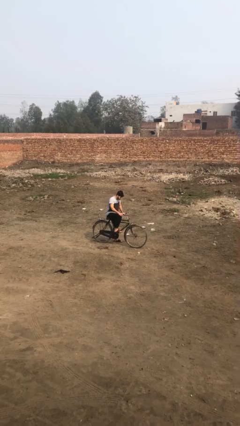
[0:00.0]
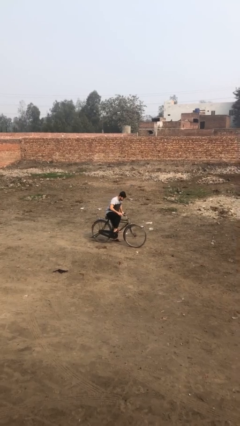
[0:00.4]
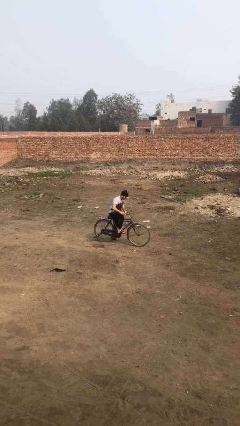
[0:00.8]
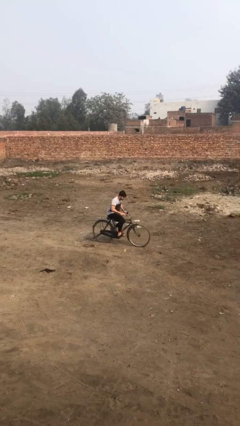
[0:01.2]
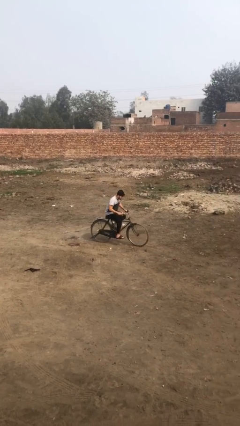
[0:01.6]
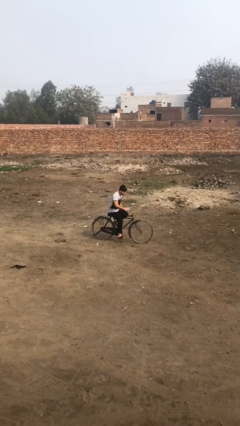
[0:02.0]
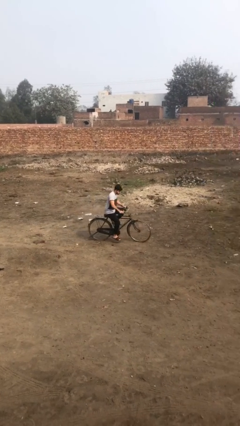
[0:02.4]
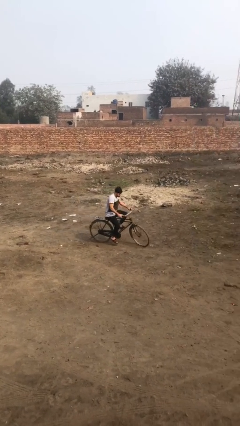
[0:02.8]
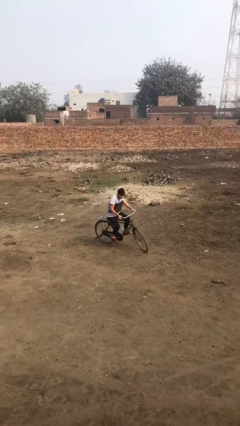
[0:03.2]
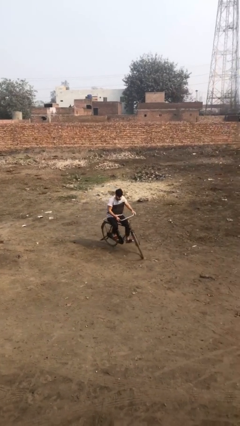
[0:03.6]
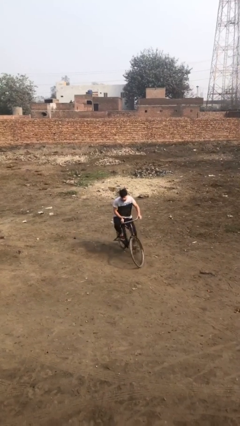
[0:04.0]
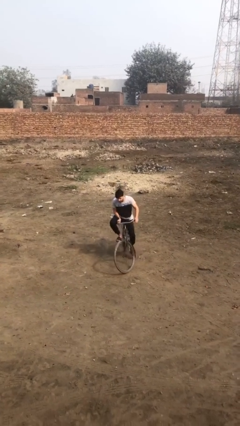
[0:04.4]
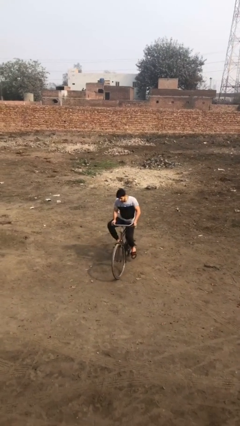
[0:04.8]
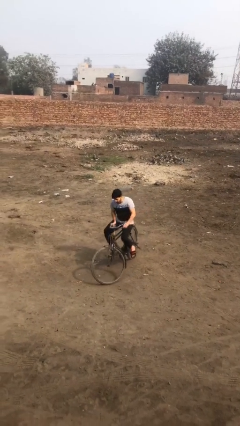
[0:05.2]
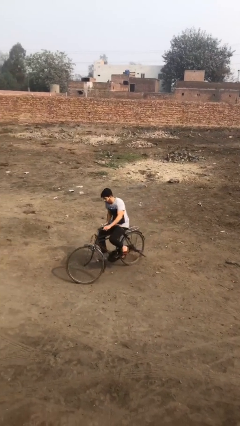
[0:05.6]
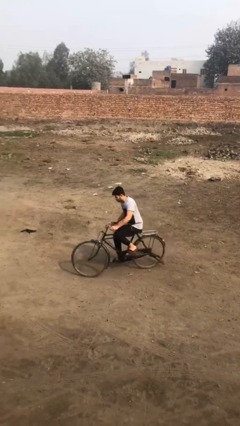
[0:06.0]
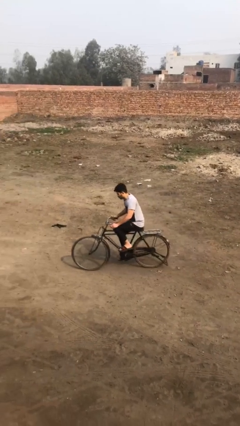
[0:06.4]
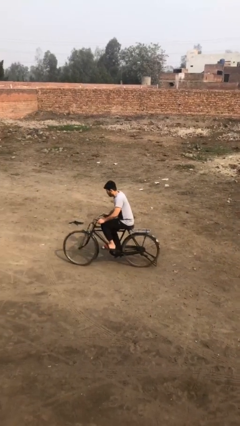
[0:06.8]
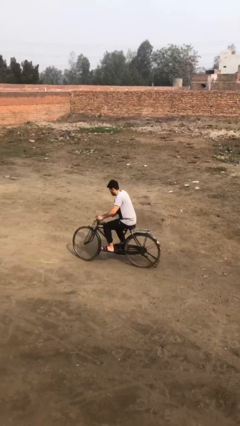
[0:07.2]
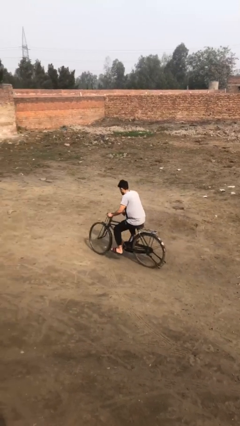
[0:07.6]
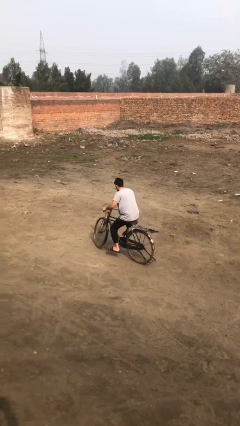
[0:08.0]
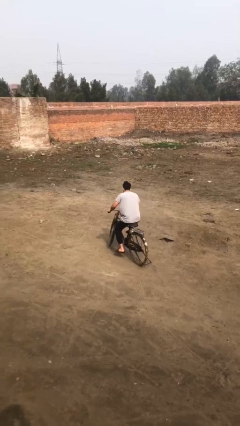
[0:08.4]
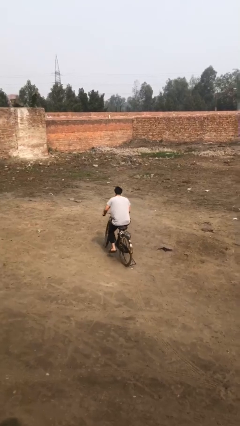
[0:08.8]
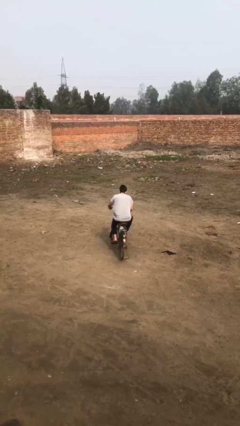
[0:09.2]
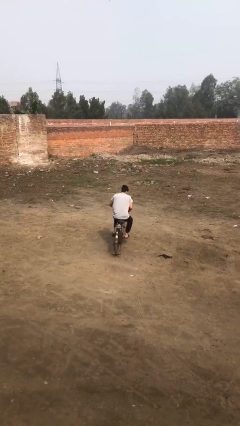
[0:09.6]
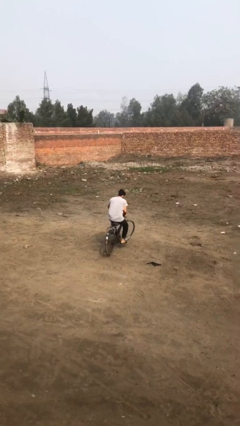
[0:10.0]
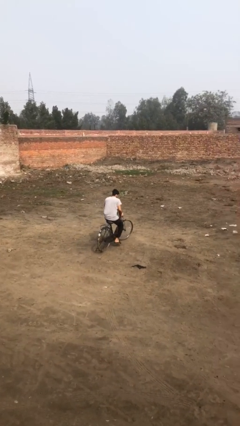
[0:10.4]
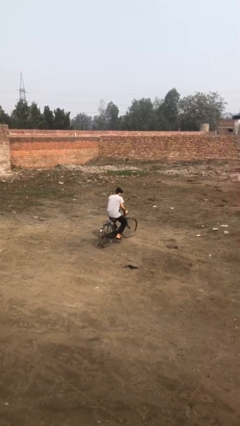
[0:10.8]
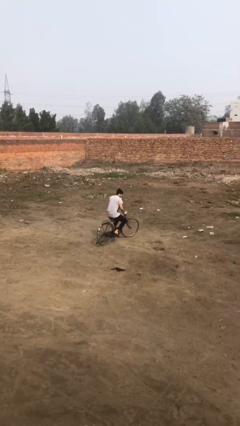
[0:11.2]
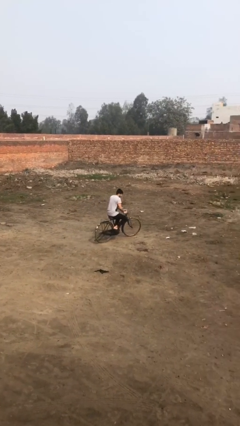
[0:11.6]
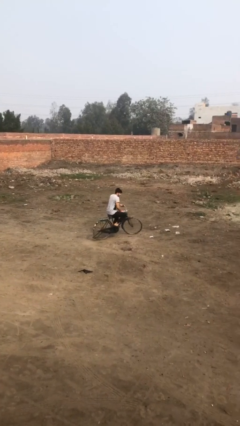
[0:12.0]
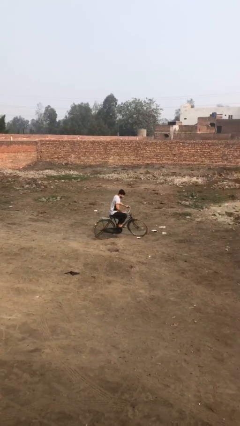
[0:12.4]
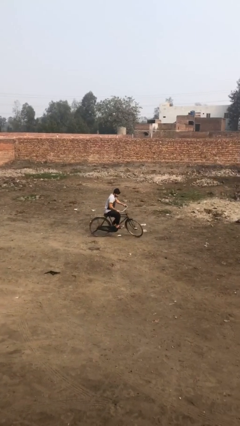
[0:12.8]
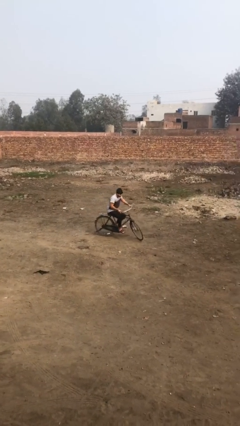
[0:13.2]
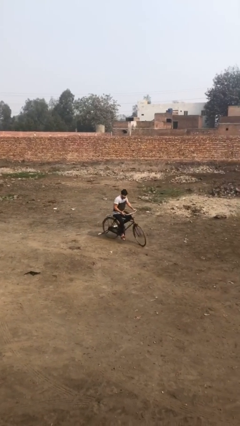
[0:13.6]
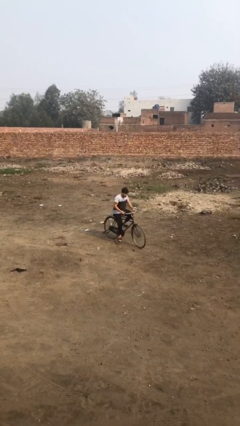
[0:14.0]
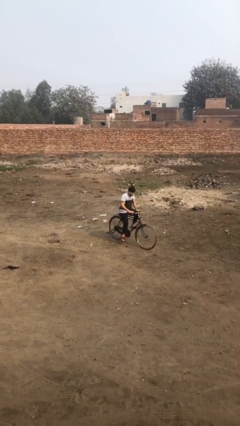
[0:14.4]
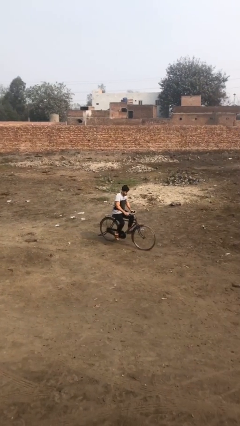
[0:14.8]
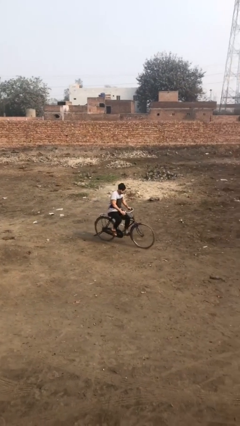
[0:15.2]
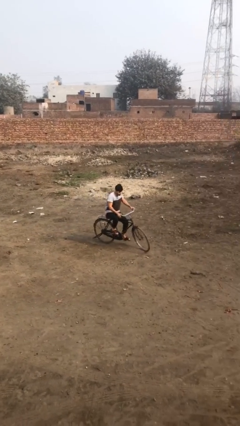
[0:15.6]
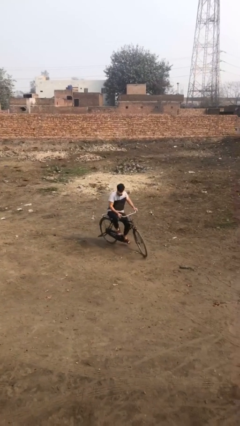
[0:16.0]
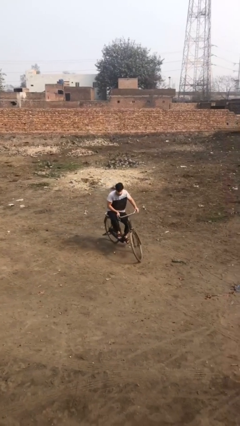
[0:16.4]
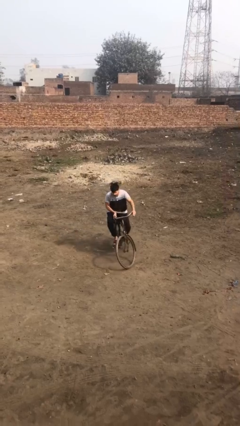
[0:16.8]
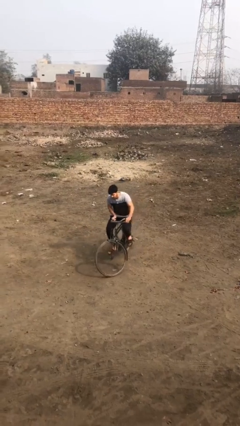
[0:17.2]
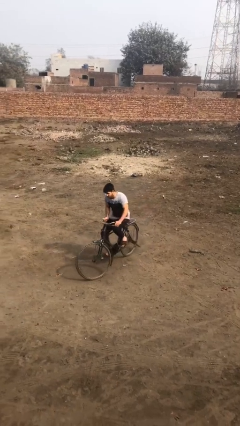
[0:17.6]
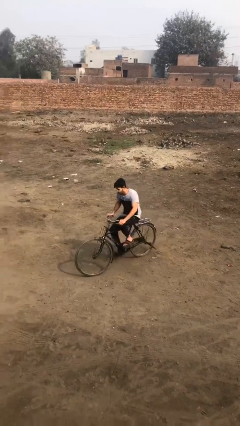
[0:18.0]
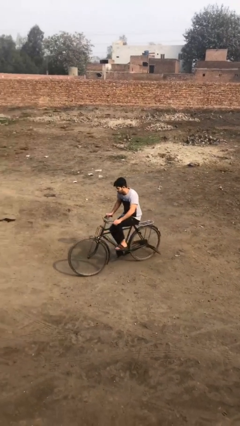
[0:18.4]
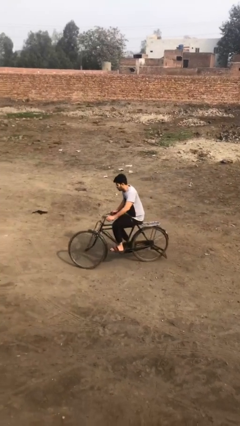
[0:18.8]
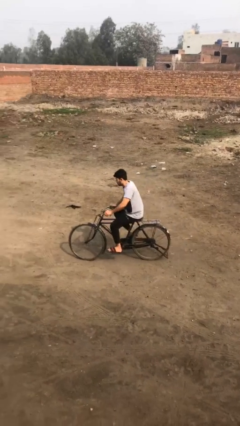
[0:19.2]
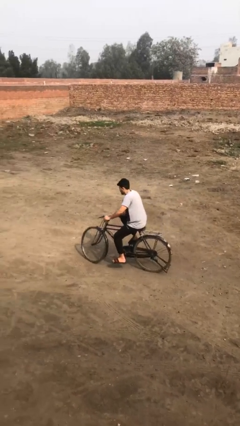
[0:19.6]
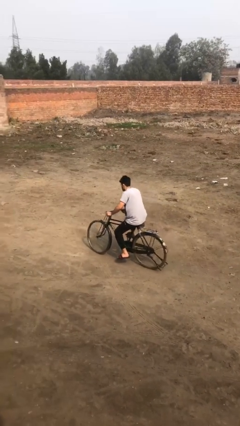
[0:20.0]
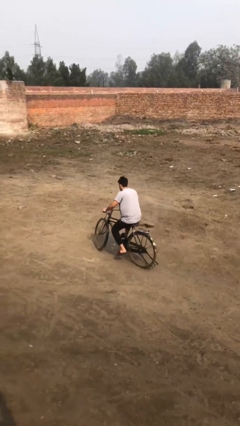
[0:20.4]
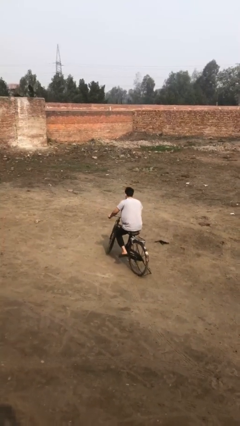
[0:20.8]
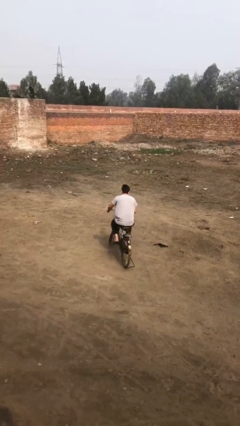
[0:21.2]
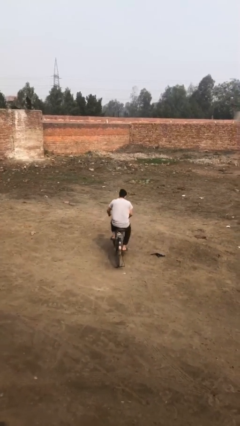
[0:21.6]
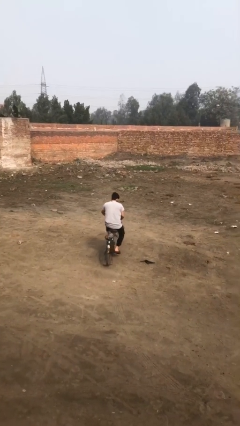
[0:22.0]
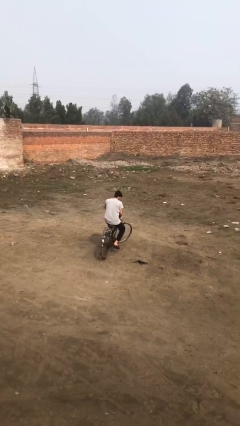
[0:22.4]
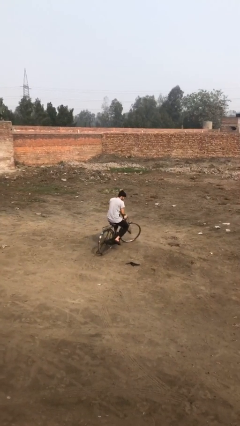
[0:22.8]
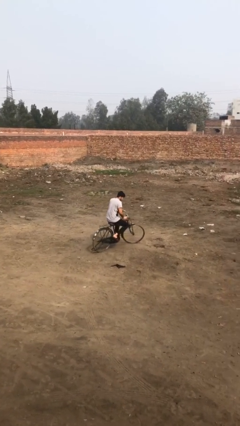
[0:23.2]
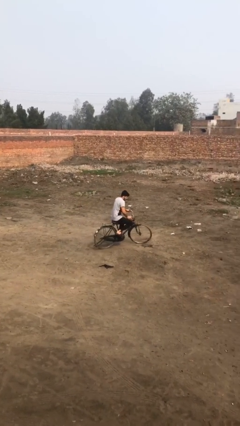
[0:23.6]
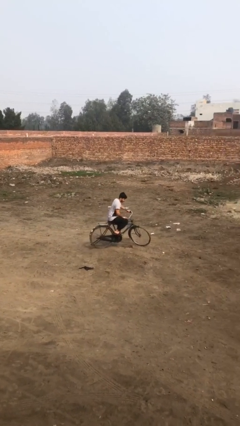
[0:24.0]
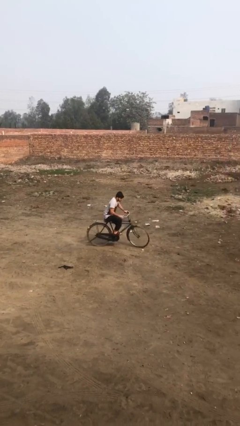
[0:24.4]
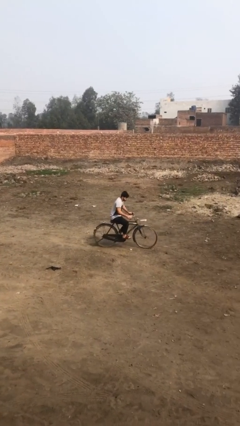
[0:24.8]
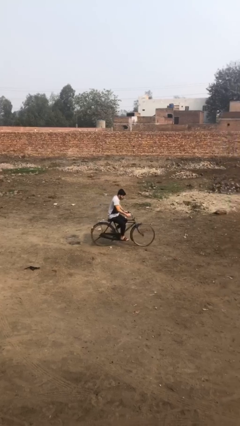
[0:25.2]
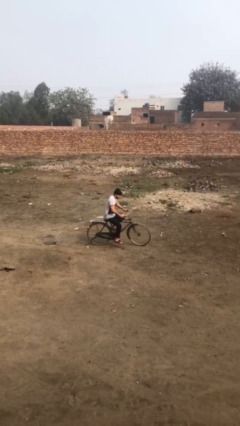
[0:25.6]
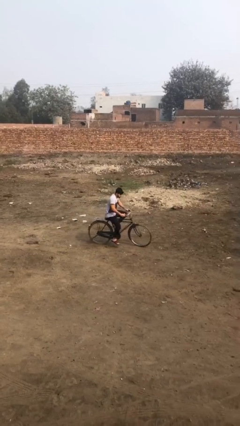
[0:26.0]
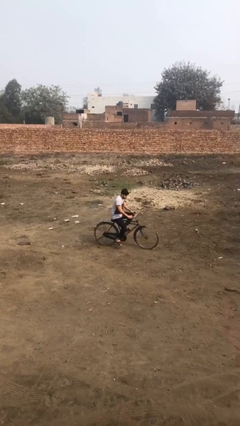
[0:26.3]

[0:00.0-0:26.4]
person rides bicycle

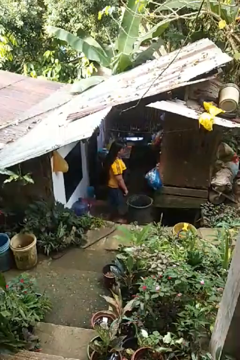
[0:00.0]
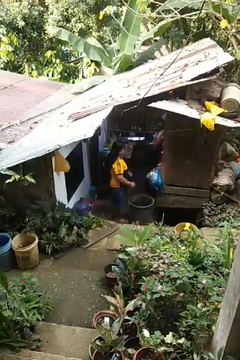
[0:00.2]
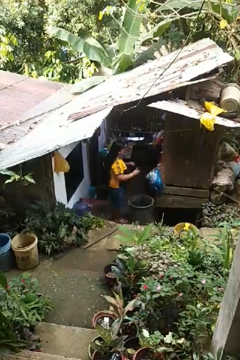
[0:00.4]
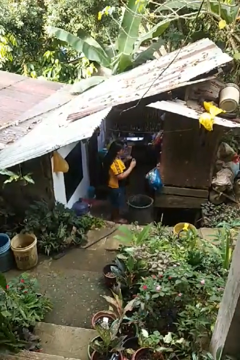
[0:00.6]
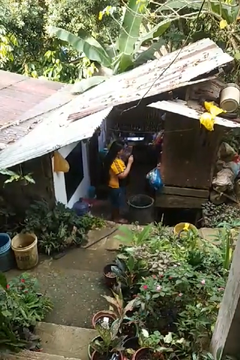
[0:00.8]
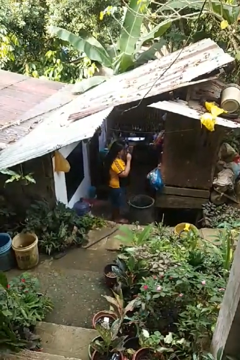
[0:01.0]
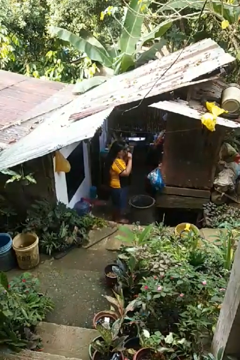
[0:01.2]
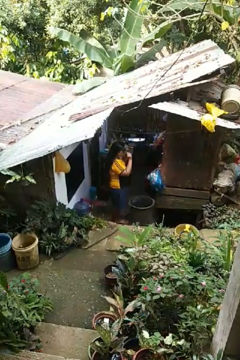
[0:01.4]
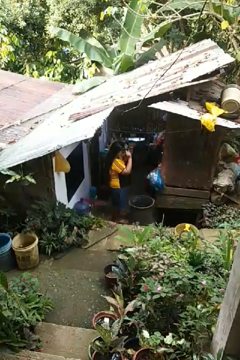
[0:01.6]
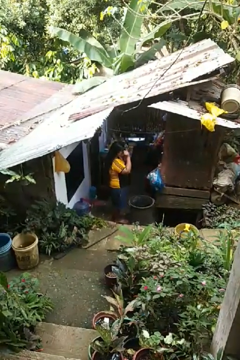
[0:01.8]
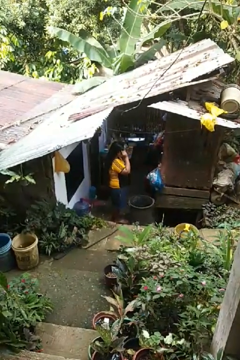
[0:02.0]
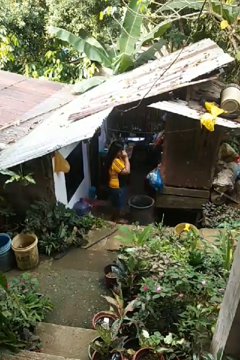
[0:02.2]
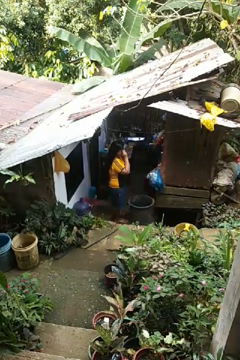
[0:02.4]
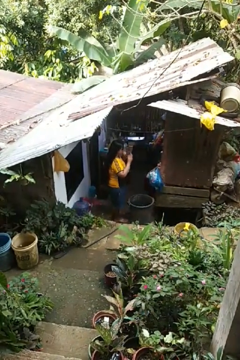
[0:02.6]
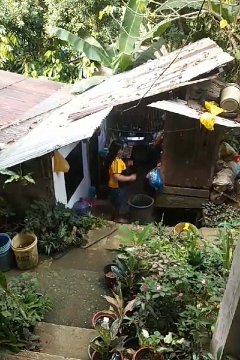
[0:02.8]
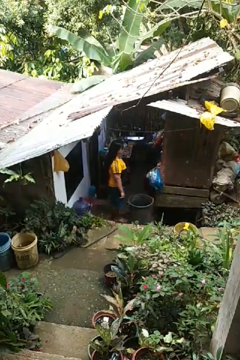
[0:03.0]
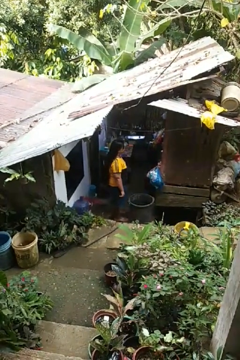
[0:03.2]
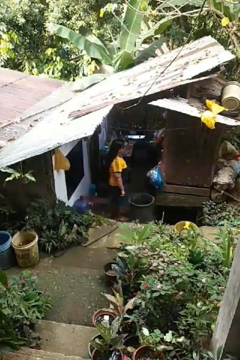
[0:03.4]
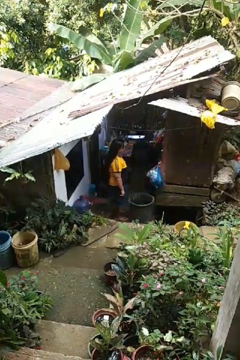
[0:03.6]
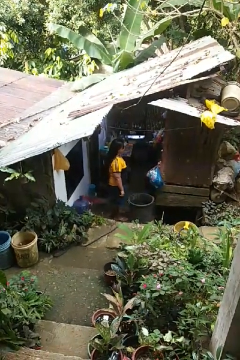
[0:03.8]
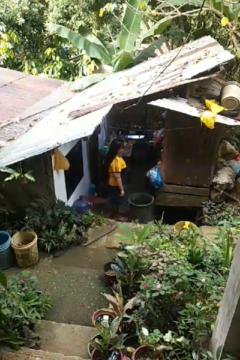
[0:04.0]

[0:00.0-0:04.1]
person puts on sunglasses

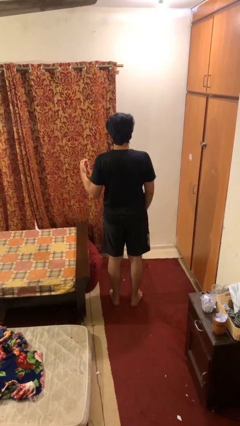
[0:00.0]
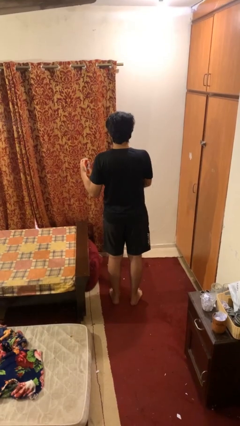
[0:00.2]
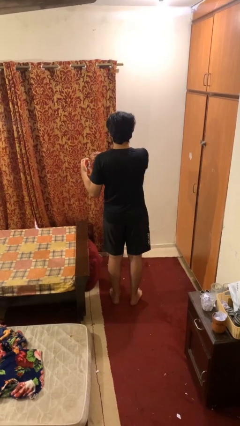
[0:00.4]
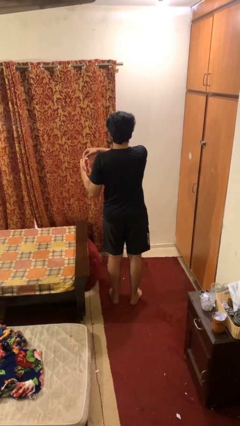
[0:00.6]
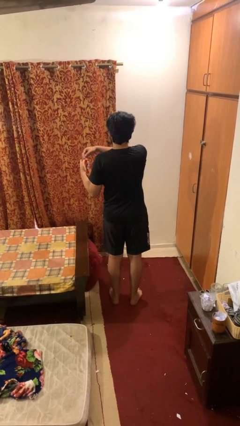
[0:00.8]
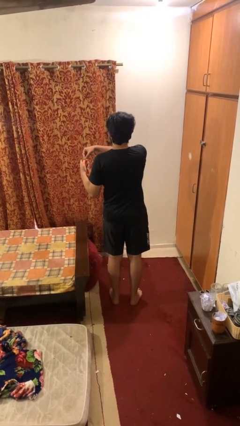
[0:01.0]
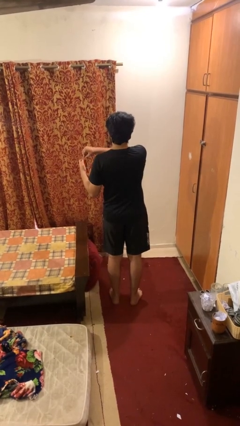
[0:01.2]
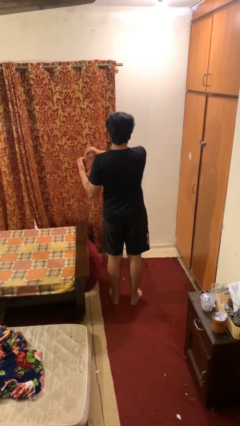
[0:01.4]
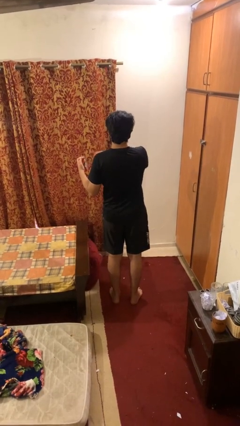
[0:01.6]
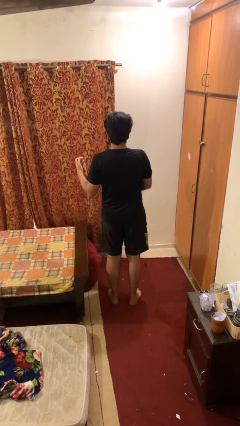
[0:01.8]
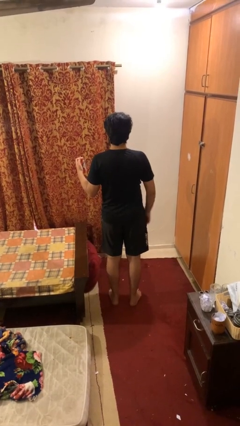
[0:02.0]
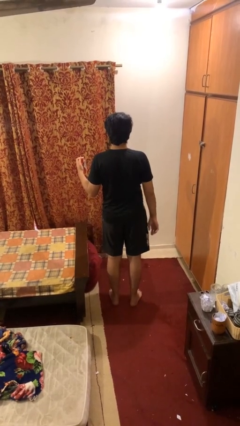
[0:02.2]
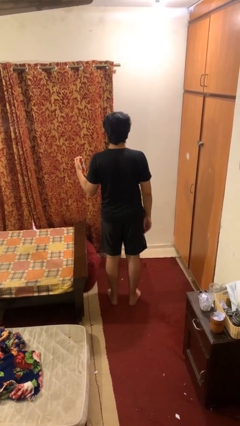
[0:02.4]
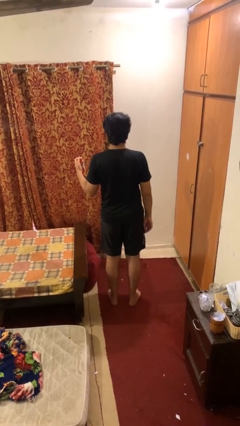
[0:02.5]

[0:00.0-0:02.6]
person opens beverage can
